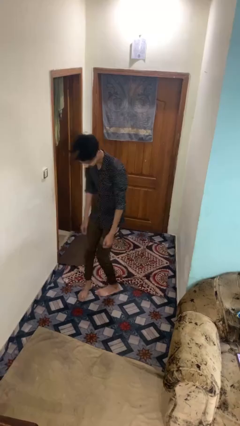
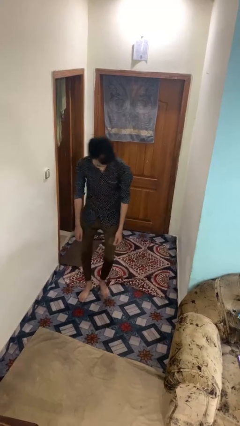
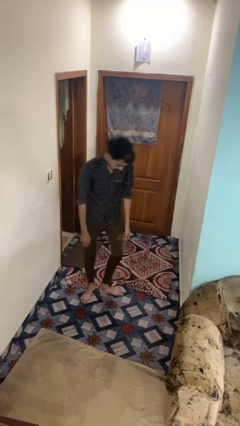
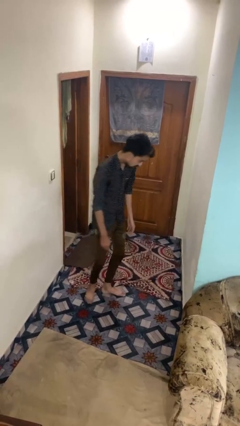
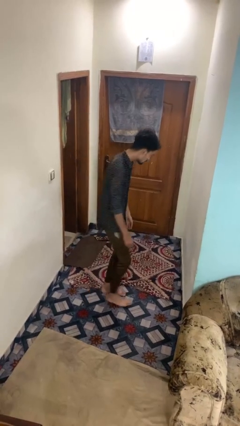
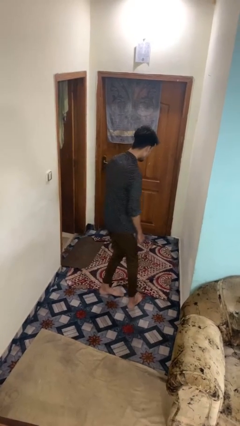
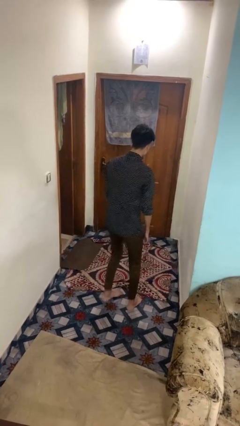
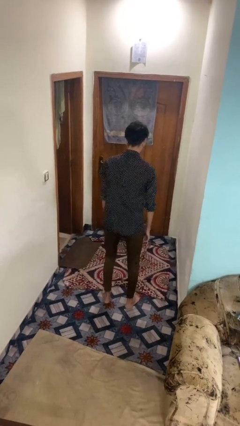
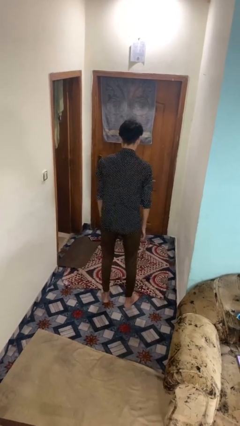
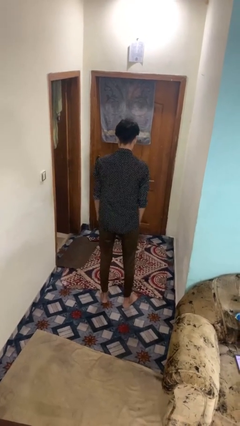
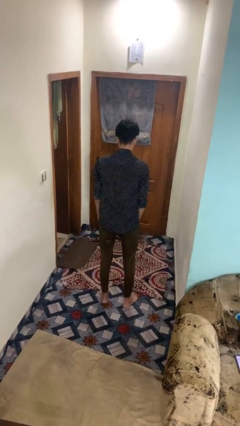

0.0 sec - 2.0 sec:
person twirls

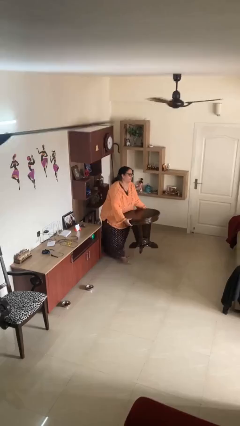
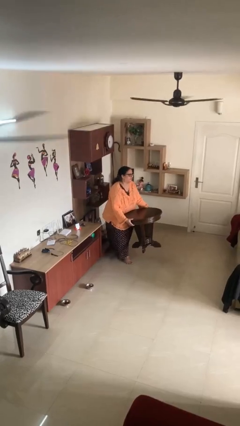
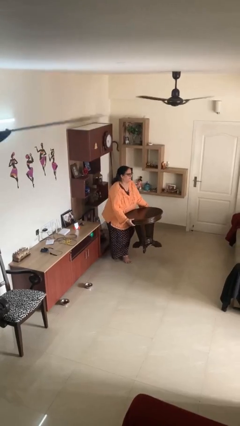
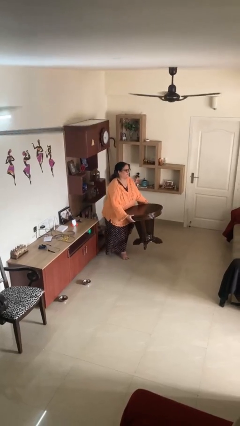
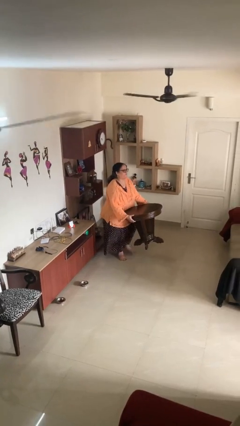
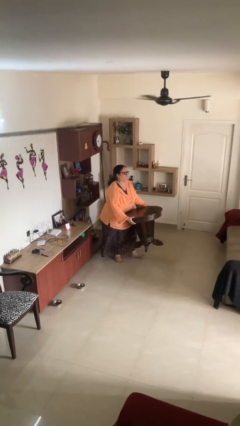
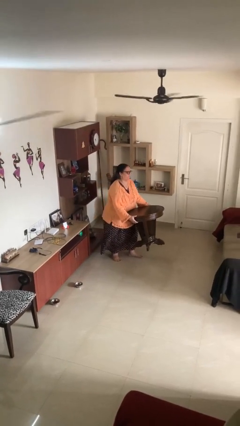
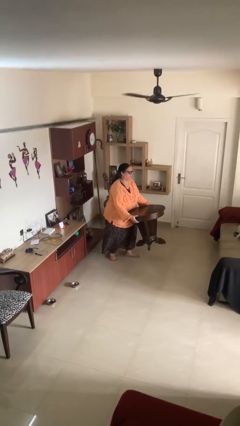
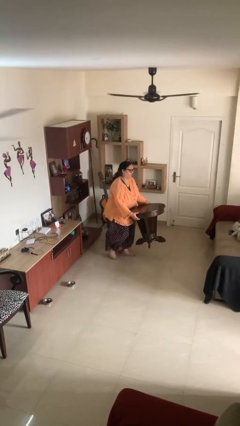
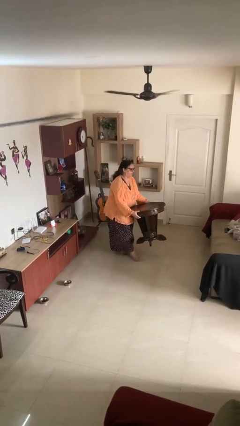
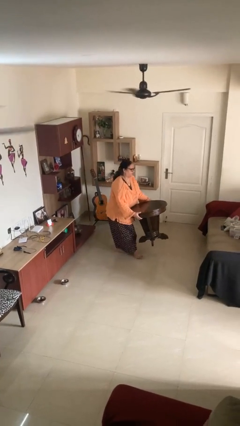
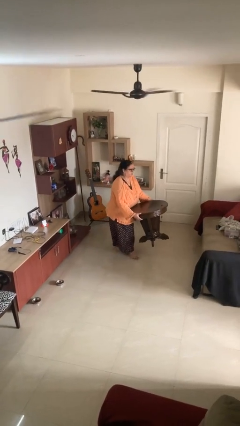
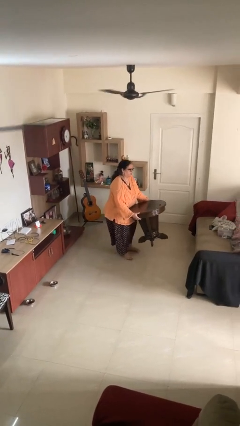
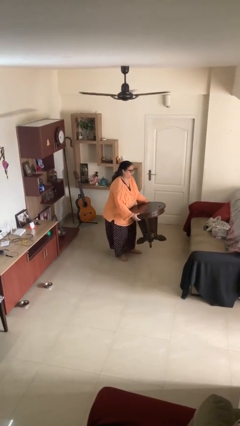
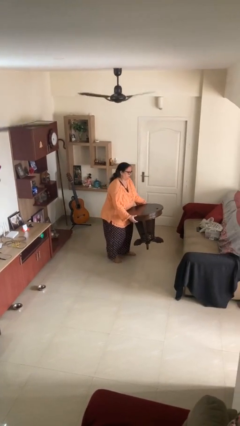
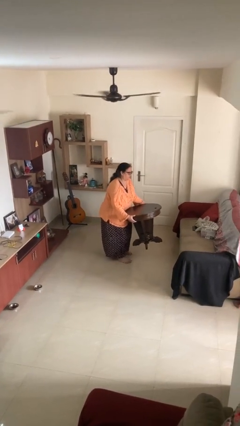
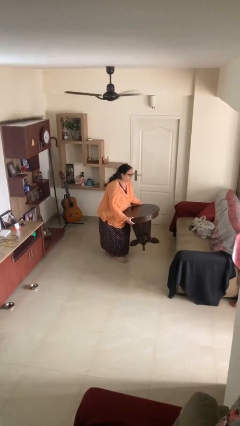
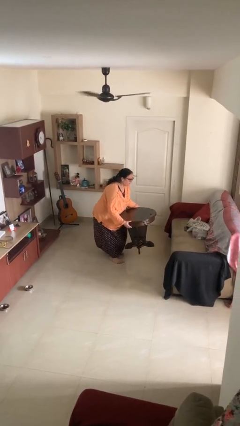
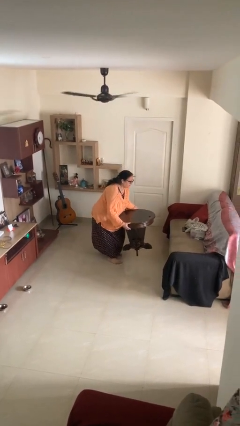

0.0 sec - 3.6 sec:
person carries heavy object

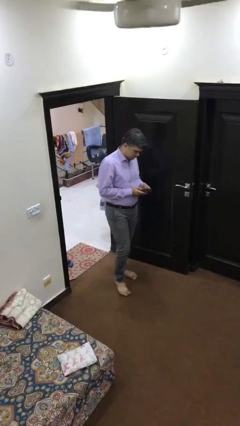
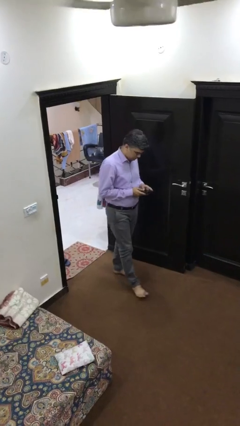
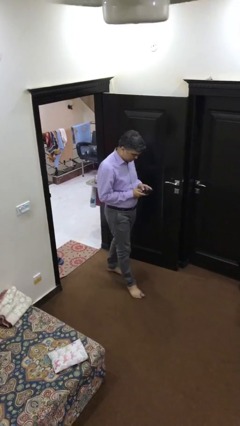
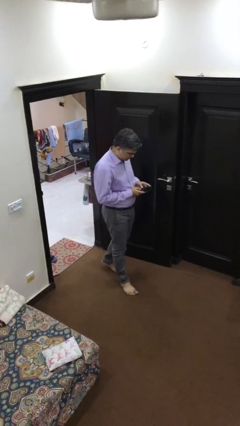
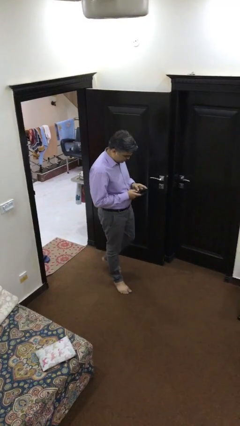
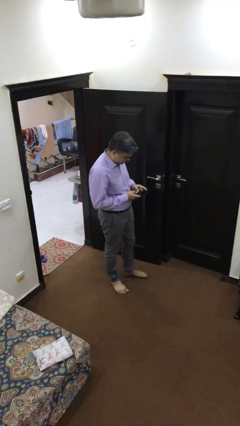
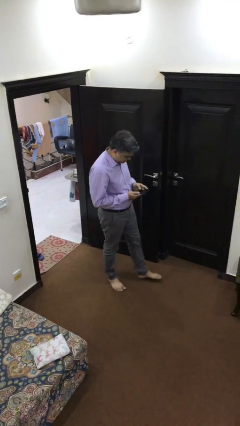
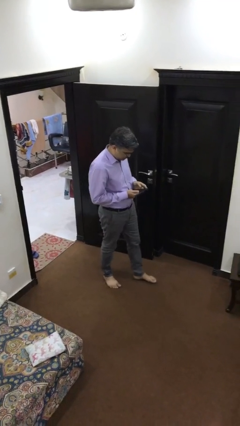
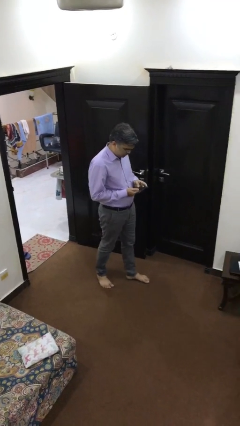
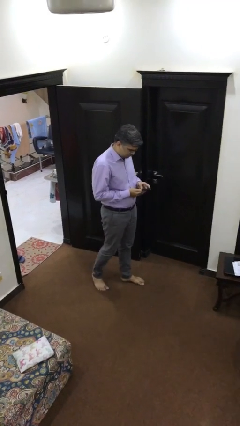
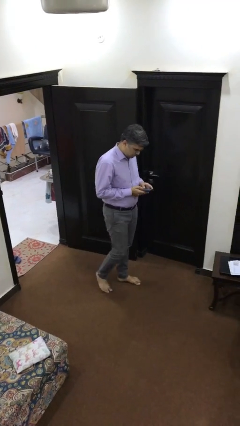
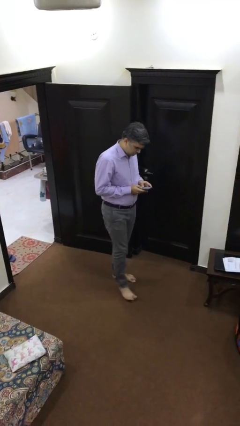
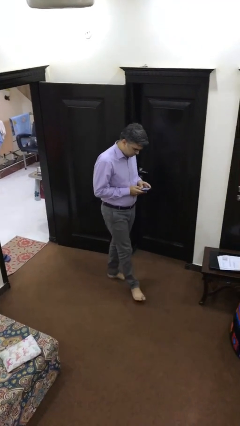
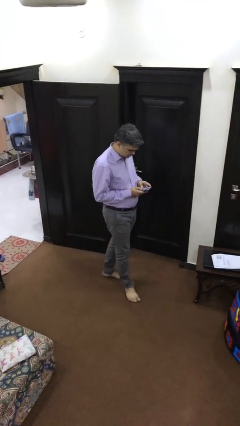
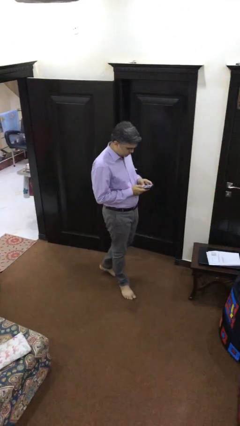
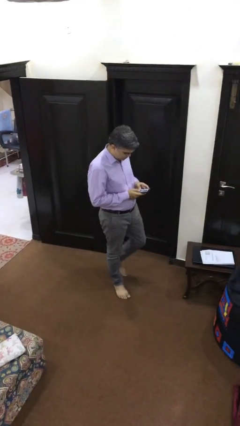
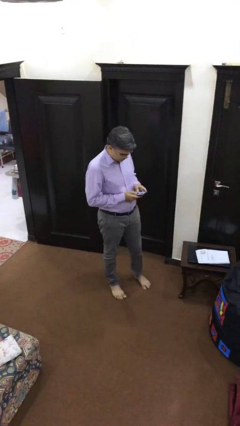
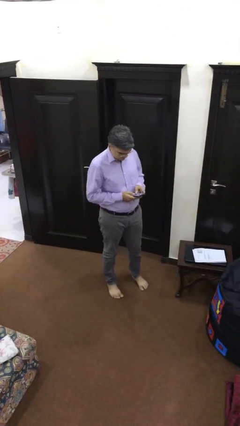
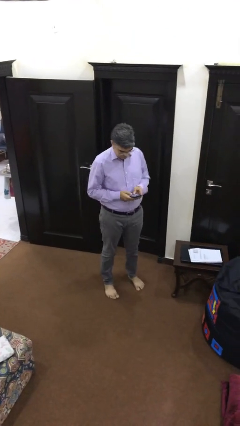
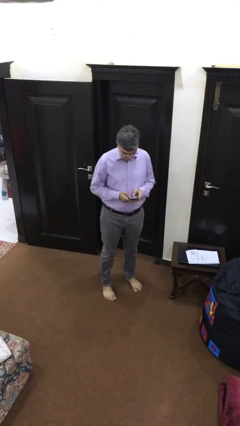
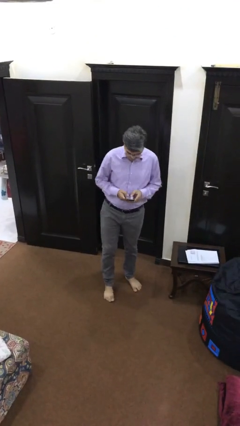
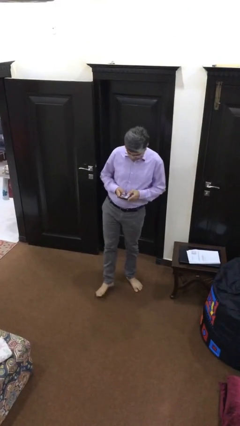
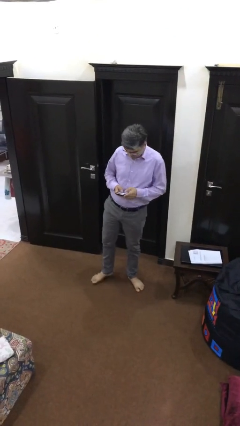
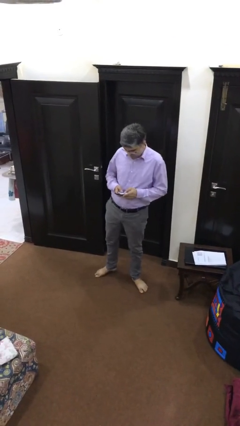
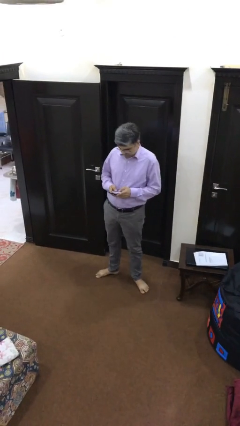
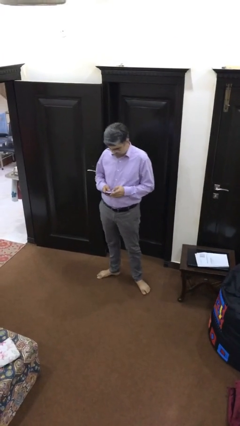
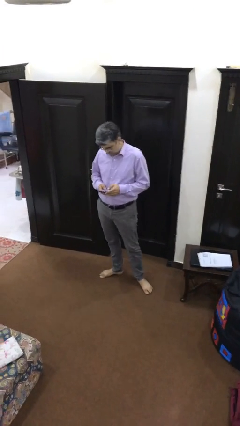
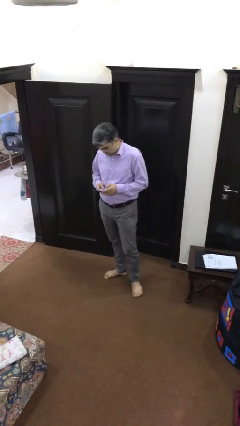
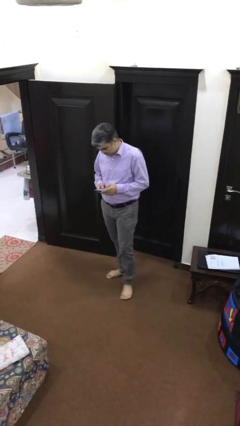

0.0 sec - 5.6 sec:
person texts on phone

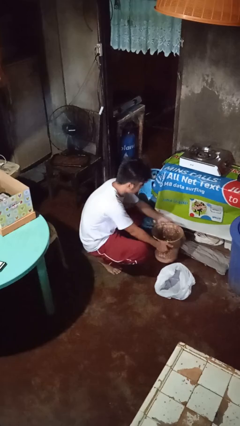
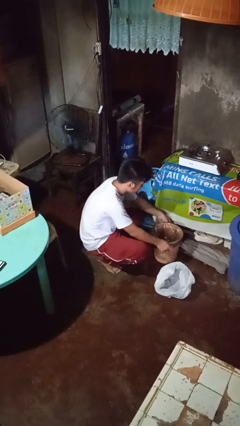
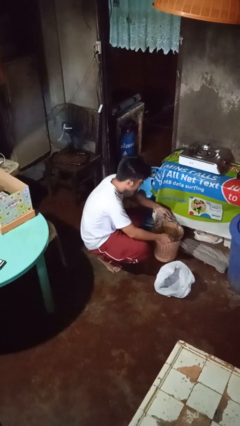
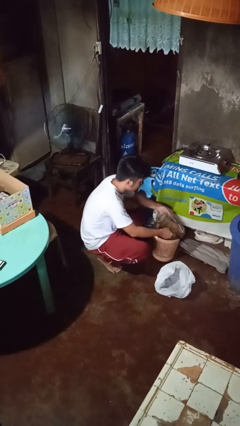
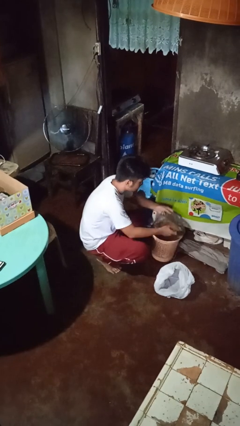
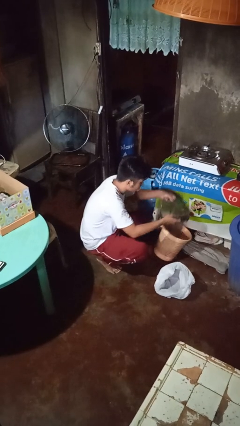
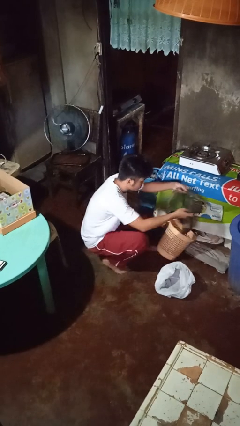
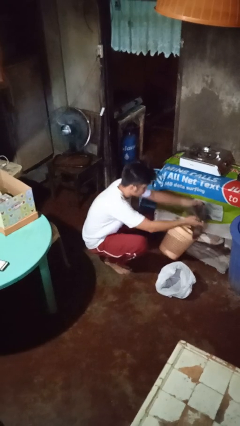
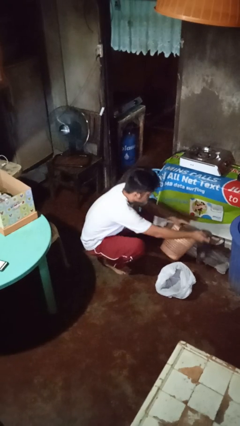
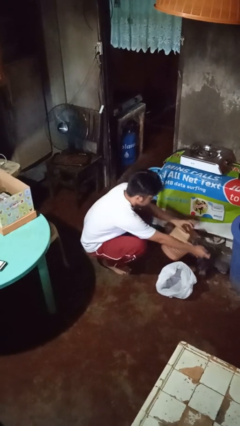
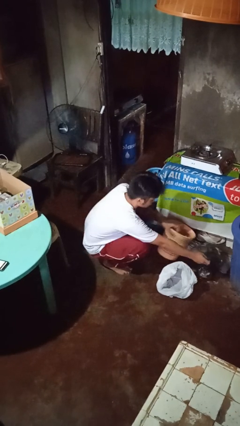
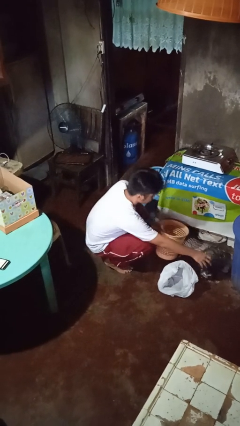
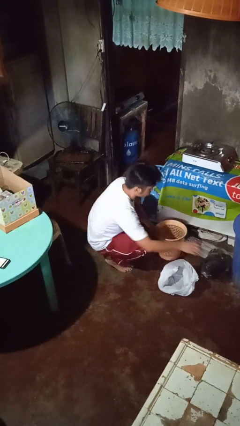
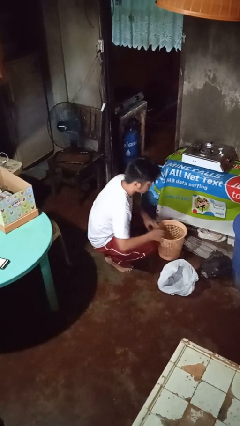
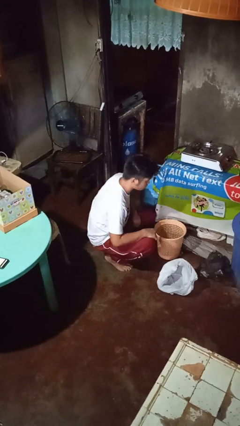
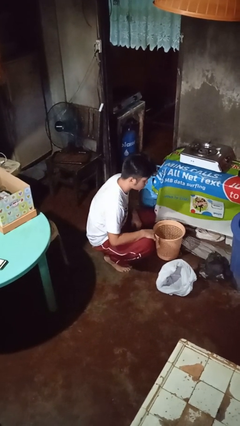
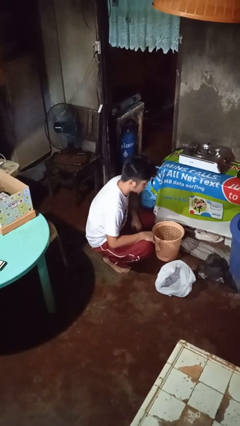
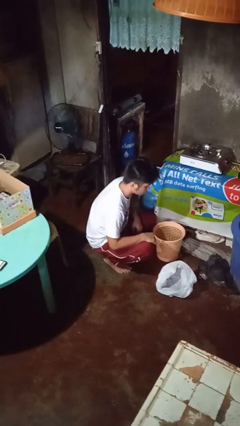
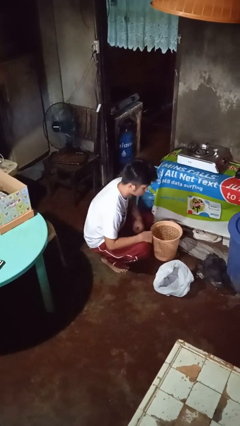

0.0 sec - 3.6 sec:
person removes trashbag from trashcan

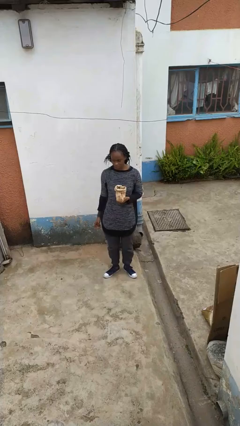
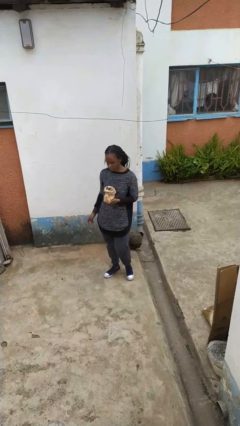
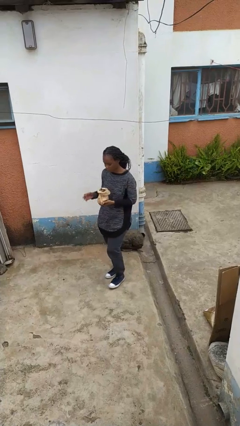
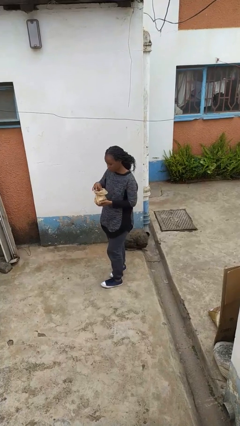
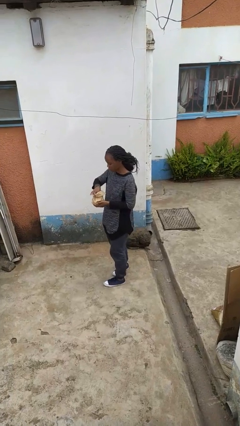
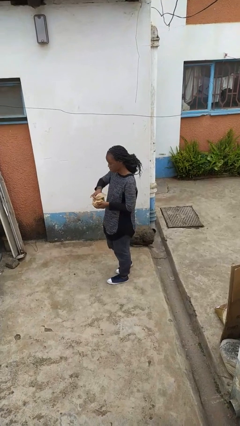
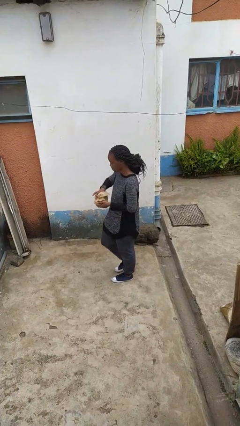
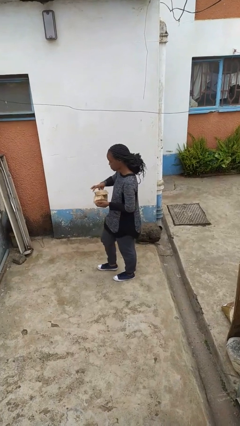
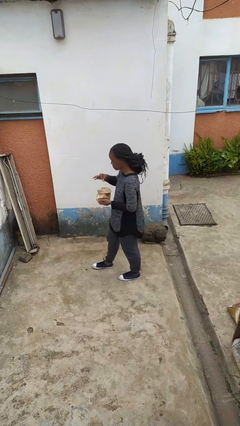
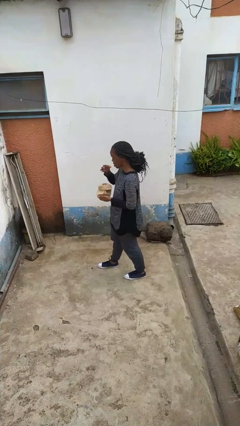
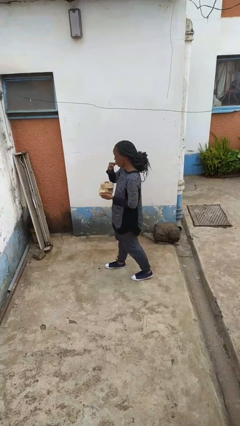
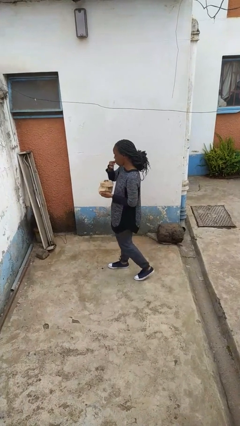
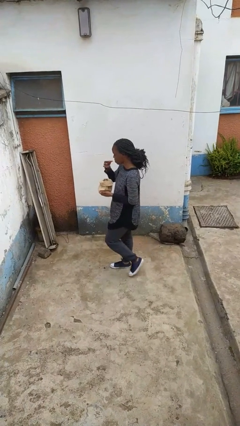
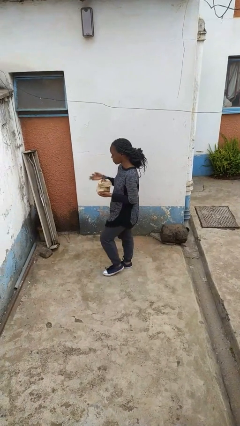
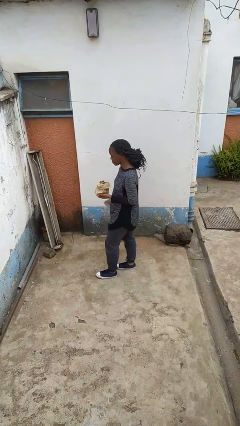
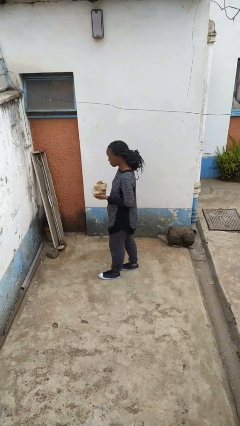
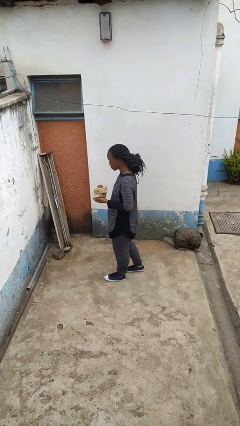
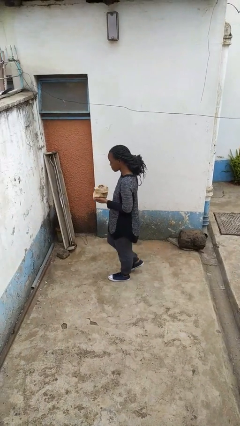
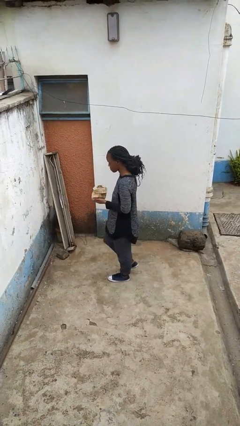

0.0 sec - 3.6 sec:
person eats snack from bag
